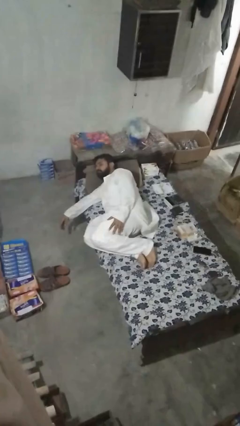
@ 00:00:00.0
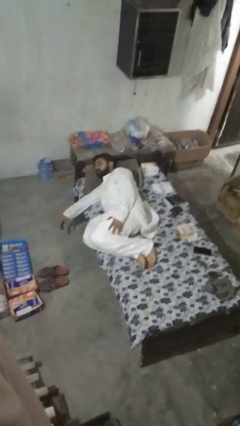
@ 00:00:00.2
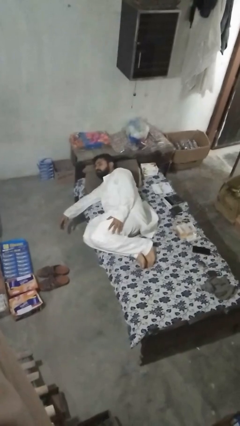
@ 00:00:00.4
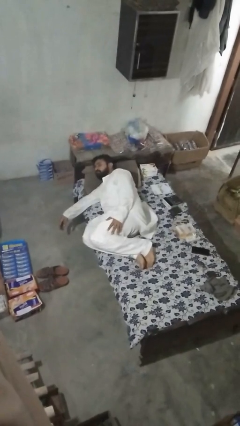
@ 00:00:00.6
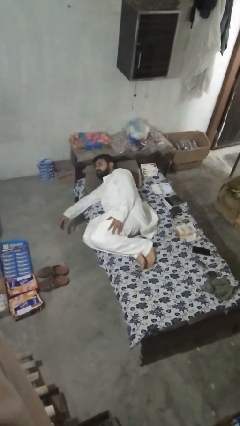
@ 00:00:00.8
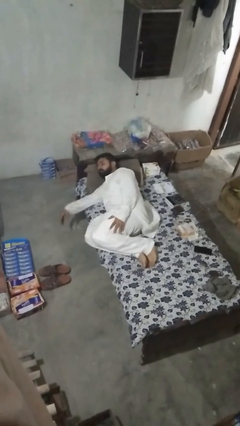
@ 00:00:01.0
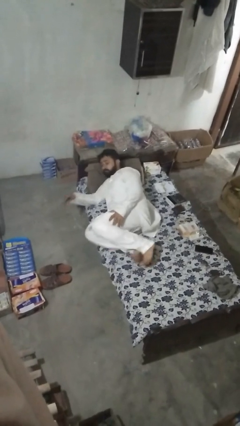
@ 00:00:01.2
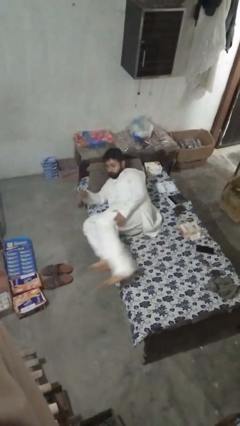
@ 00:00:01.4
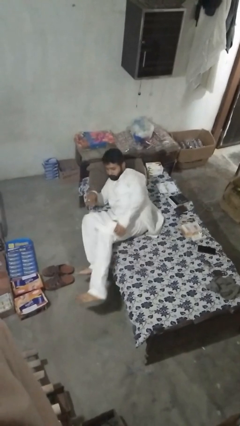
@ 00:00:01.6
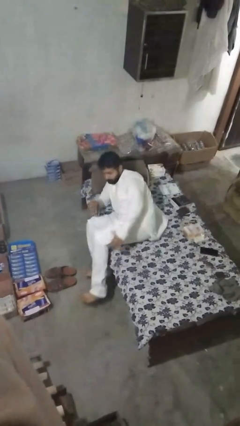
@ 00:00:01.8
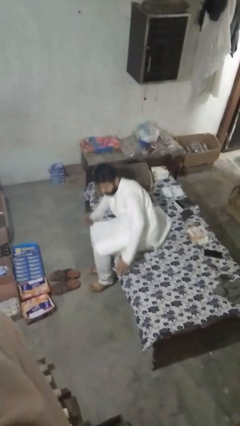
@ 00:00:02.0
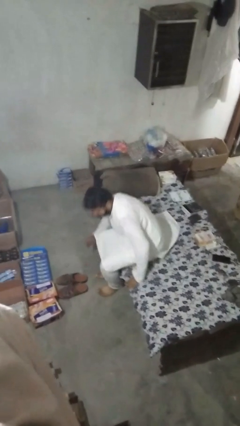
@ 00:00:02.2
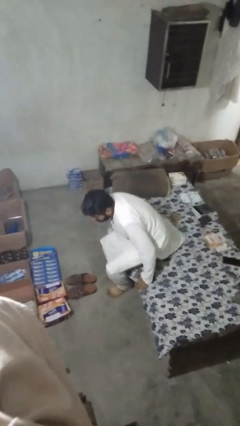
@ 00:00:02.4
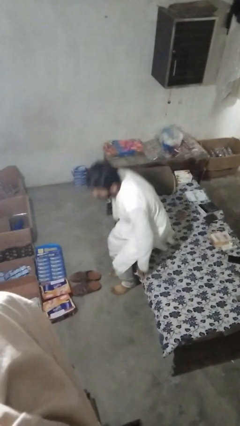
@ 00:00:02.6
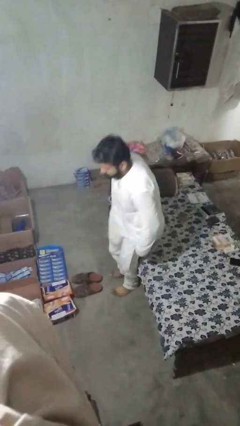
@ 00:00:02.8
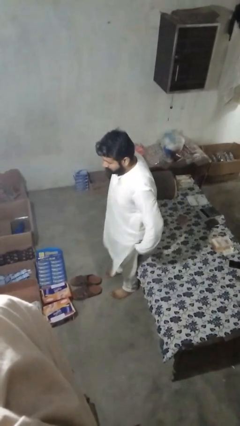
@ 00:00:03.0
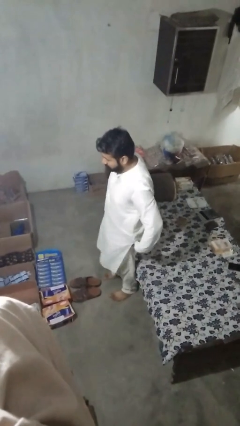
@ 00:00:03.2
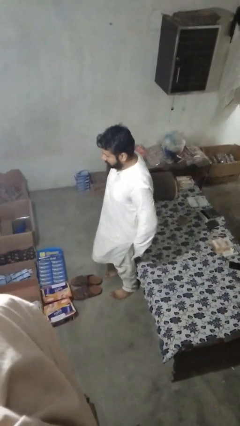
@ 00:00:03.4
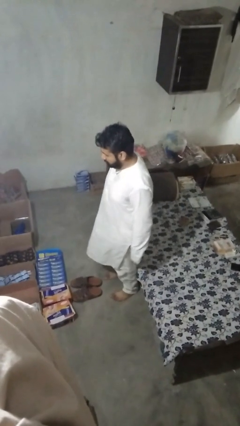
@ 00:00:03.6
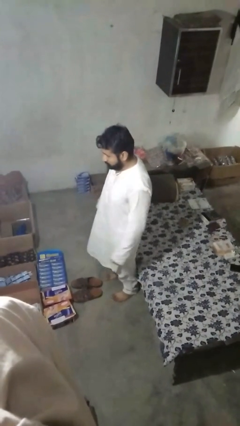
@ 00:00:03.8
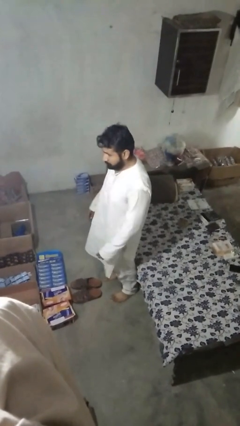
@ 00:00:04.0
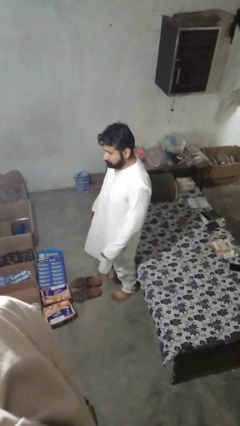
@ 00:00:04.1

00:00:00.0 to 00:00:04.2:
person stands up

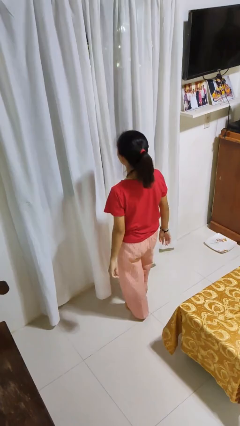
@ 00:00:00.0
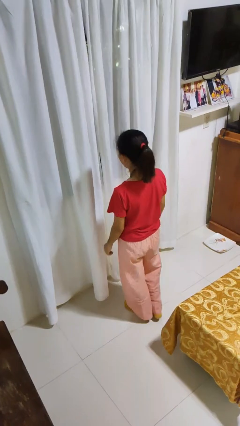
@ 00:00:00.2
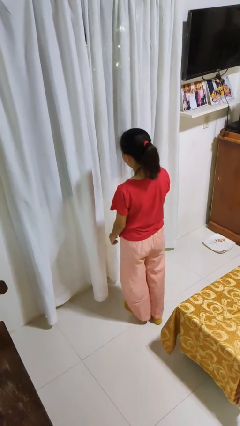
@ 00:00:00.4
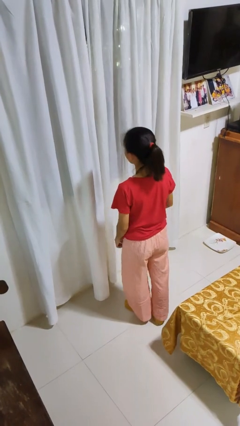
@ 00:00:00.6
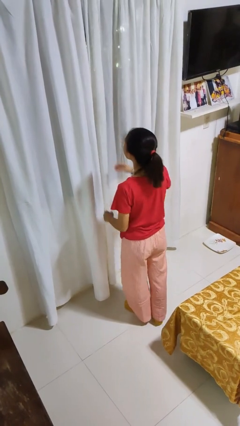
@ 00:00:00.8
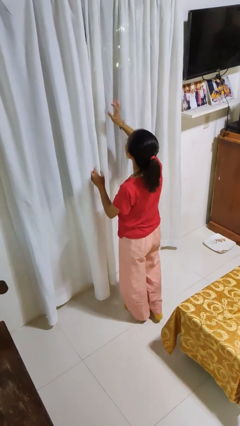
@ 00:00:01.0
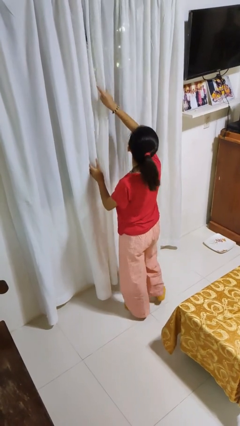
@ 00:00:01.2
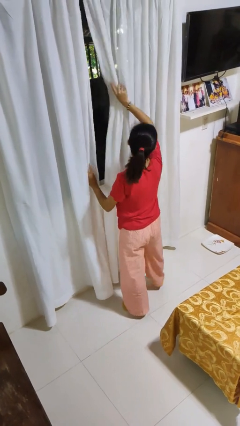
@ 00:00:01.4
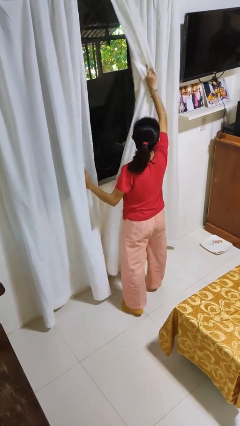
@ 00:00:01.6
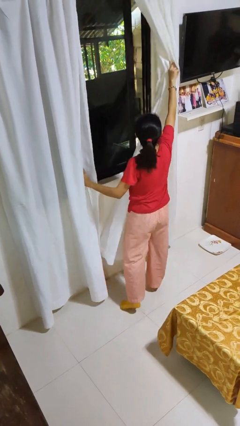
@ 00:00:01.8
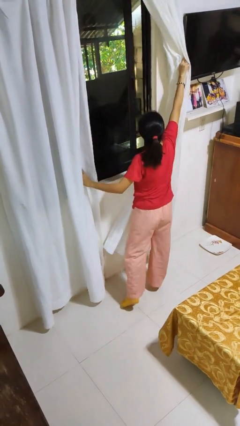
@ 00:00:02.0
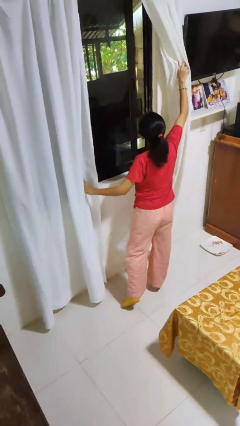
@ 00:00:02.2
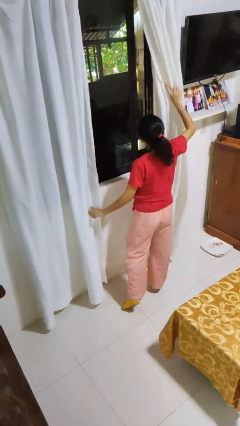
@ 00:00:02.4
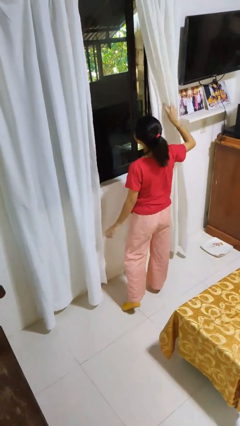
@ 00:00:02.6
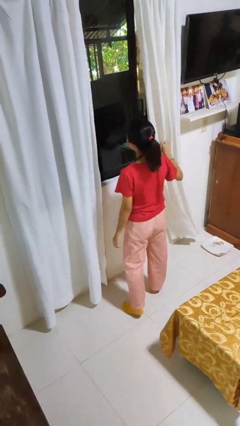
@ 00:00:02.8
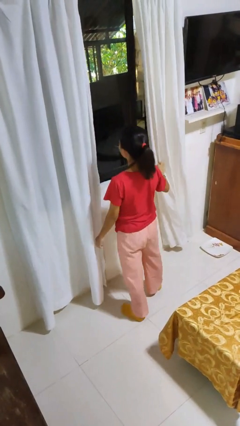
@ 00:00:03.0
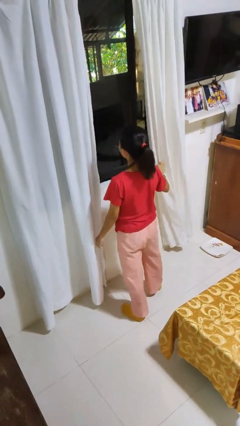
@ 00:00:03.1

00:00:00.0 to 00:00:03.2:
person opens curtains

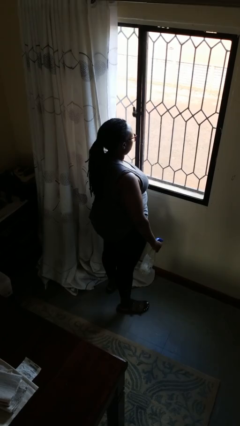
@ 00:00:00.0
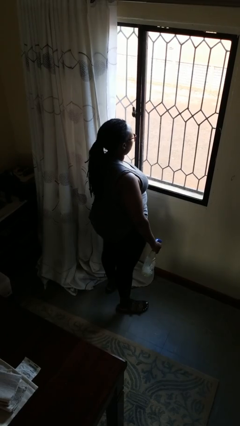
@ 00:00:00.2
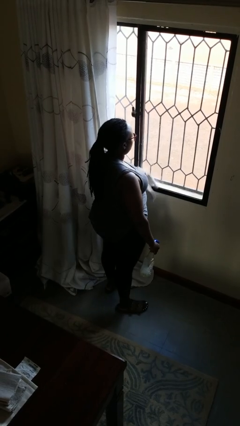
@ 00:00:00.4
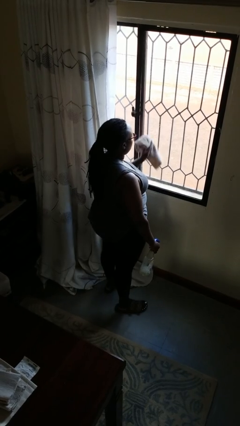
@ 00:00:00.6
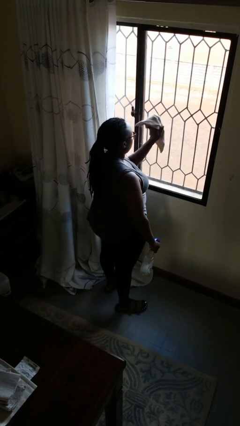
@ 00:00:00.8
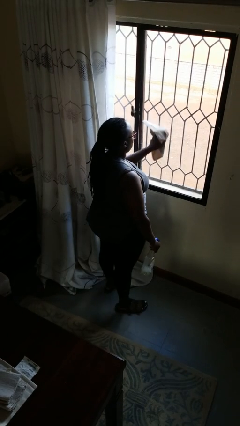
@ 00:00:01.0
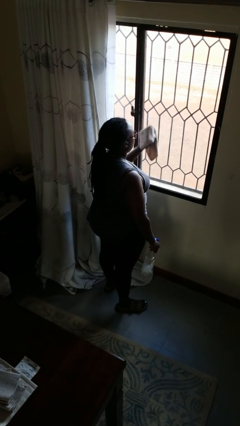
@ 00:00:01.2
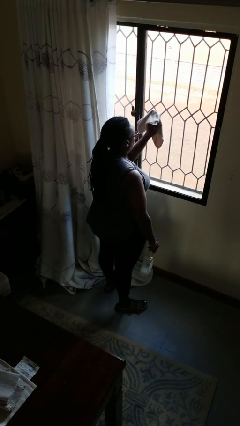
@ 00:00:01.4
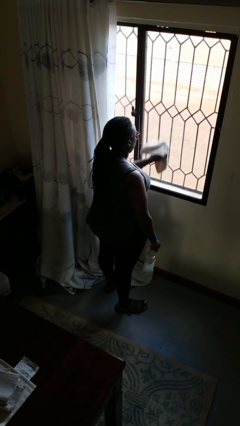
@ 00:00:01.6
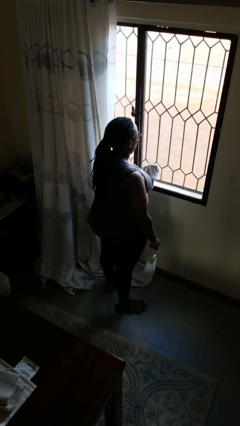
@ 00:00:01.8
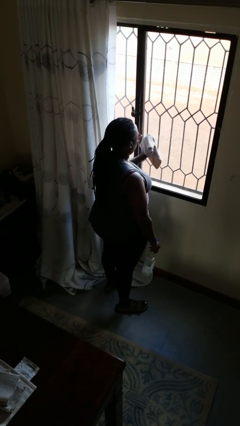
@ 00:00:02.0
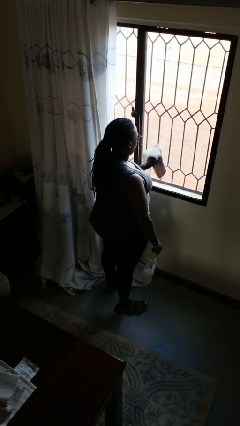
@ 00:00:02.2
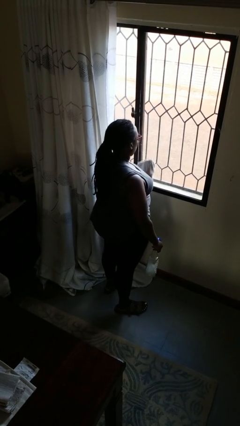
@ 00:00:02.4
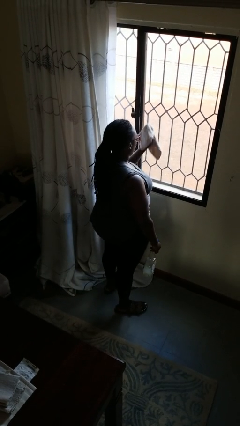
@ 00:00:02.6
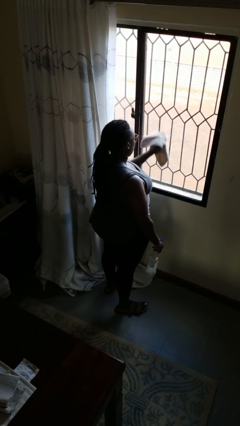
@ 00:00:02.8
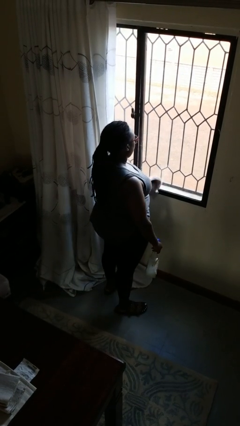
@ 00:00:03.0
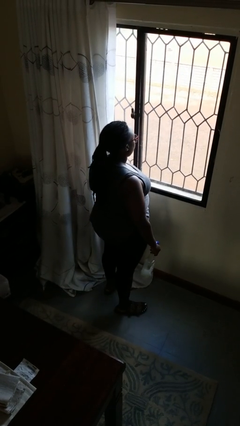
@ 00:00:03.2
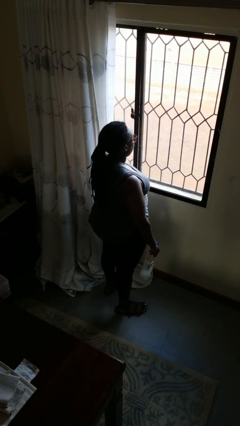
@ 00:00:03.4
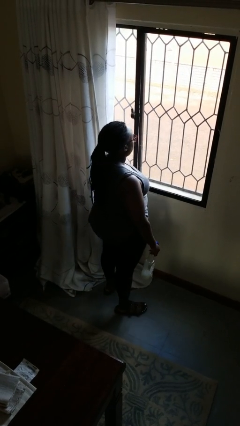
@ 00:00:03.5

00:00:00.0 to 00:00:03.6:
person washes window

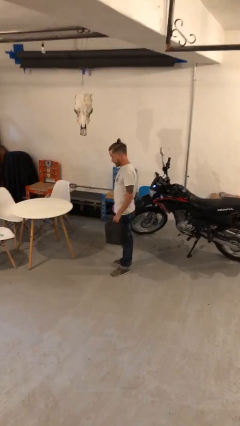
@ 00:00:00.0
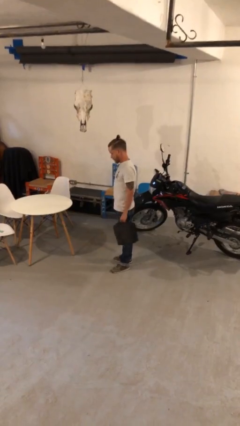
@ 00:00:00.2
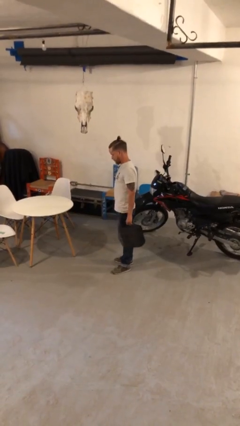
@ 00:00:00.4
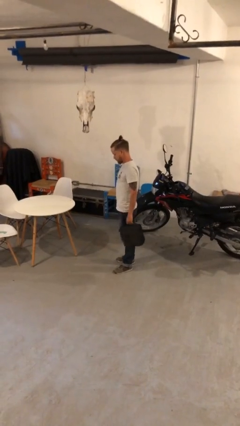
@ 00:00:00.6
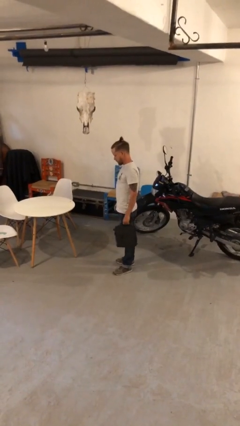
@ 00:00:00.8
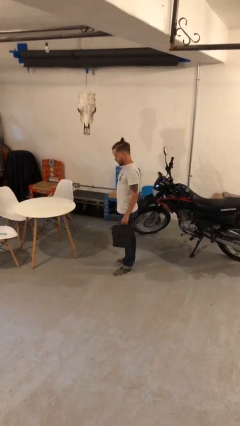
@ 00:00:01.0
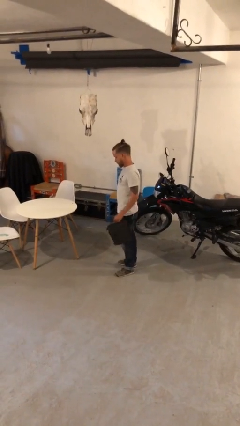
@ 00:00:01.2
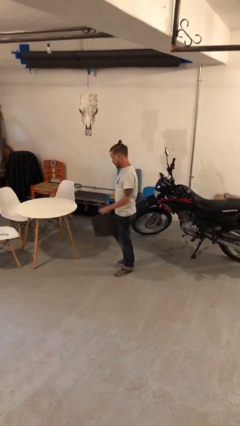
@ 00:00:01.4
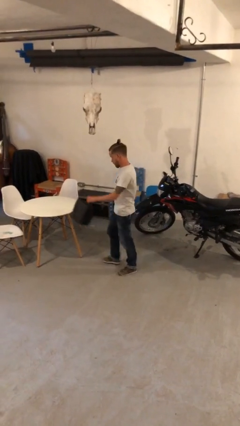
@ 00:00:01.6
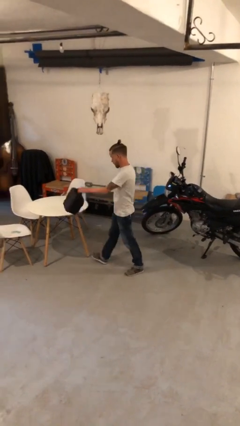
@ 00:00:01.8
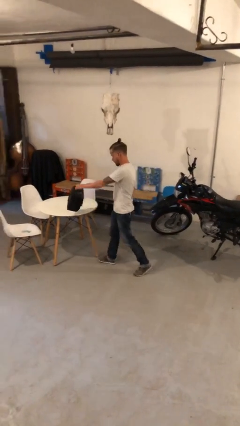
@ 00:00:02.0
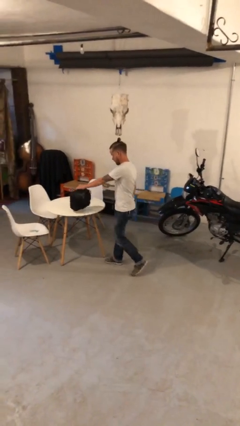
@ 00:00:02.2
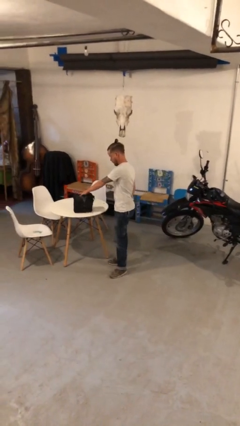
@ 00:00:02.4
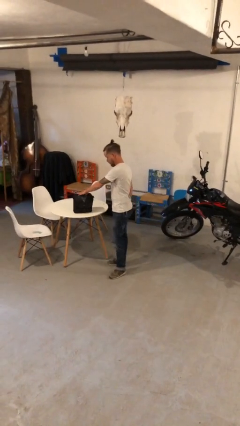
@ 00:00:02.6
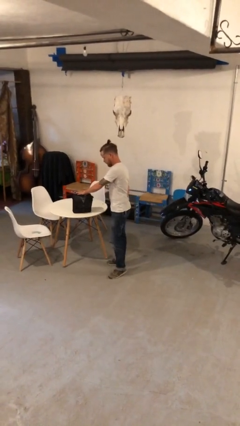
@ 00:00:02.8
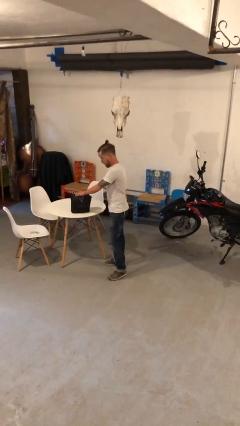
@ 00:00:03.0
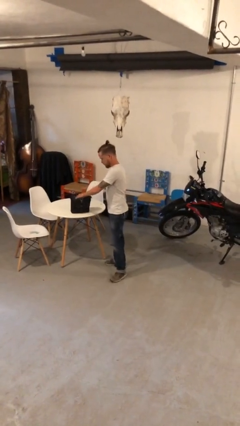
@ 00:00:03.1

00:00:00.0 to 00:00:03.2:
person puts down object on table

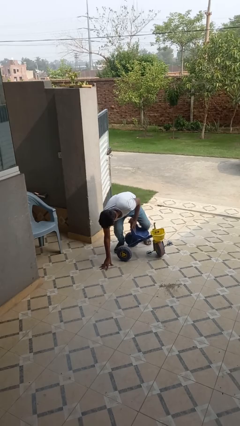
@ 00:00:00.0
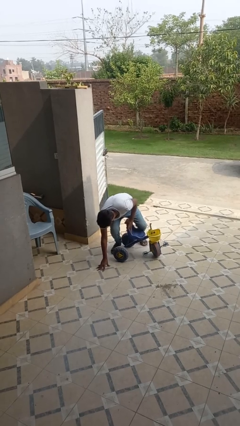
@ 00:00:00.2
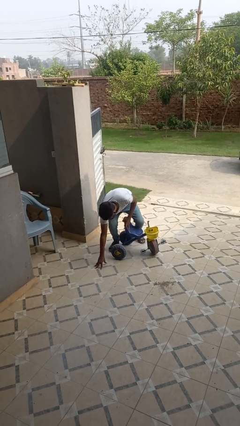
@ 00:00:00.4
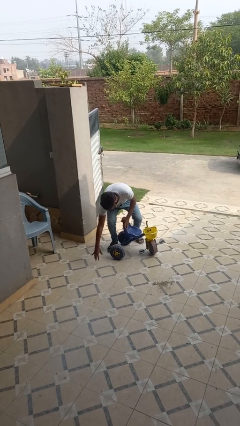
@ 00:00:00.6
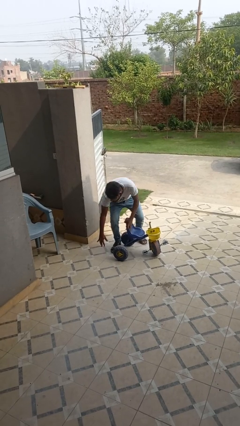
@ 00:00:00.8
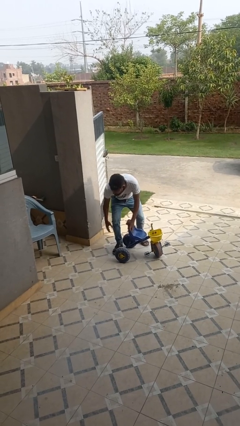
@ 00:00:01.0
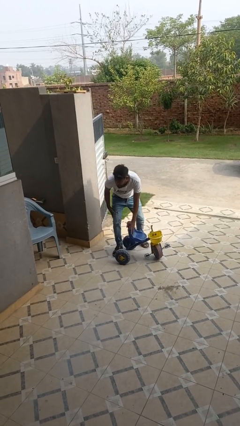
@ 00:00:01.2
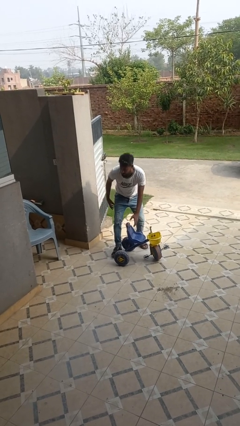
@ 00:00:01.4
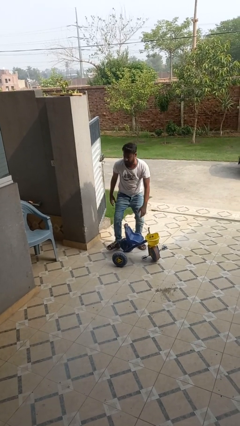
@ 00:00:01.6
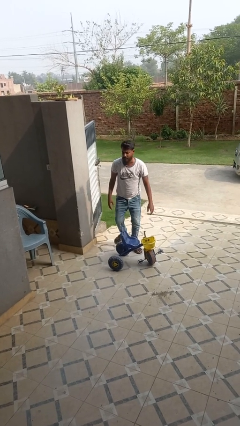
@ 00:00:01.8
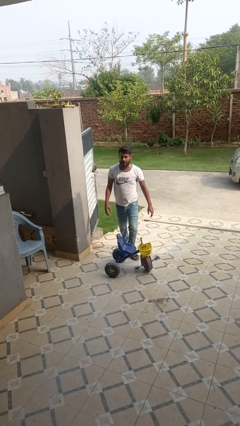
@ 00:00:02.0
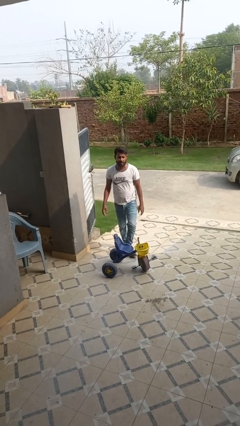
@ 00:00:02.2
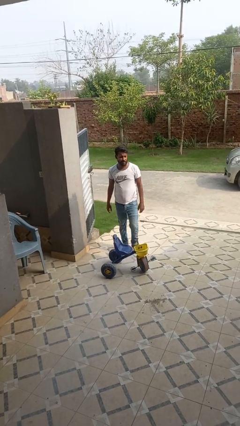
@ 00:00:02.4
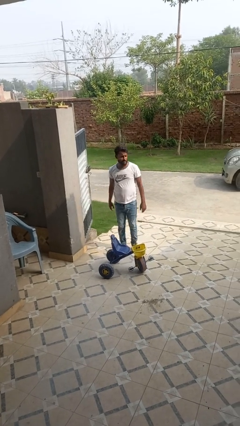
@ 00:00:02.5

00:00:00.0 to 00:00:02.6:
person stands up from floor

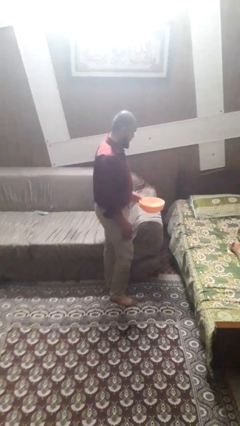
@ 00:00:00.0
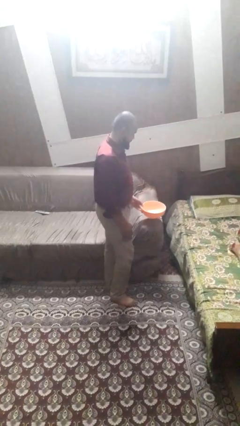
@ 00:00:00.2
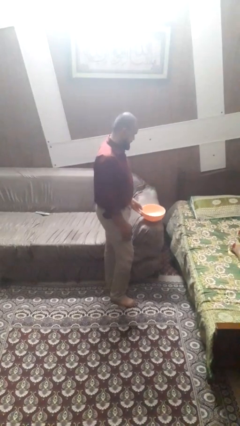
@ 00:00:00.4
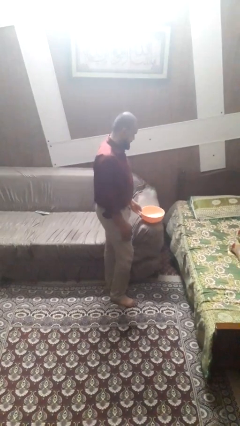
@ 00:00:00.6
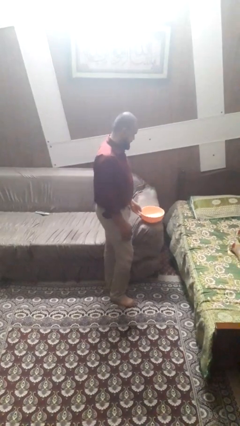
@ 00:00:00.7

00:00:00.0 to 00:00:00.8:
person puts down object on countertop
